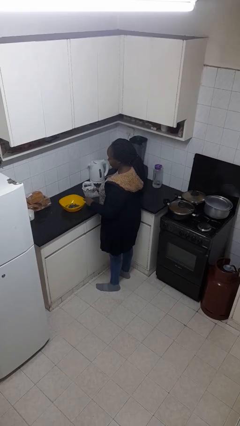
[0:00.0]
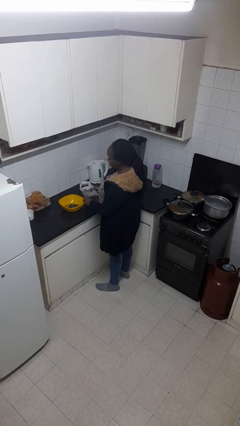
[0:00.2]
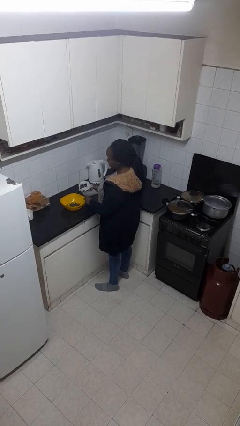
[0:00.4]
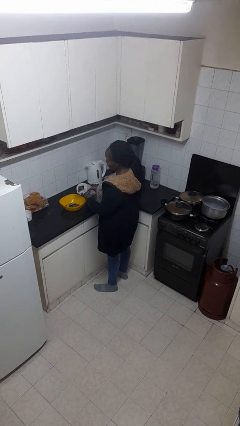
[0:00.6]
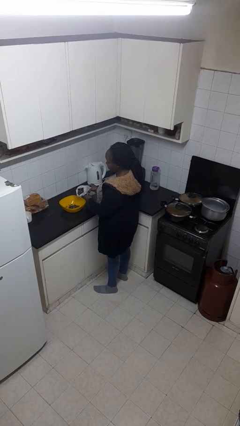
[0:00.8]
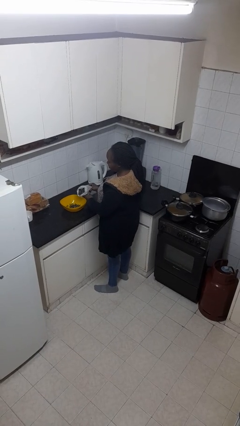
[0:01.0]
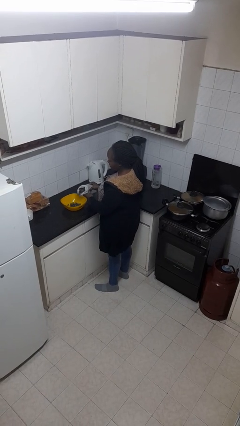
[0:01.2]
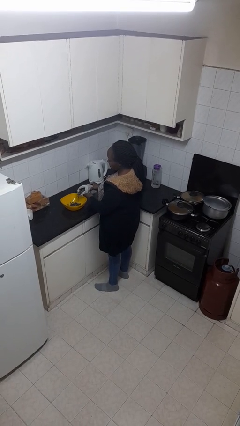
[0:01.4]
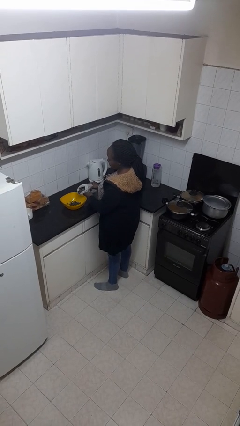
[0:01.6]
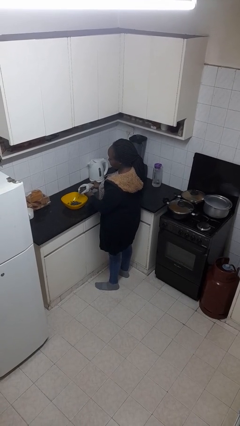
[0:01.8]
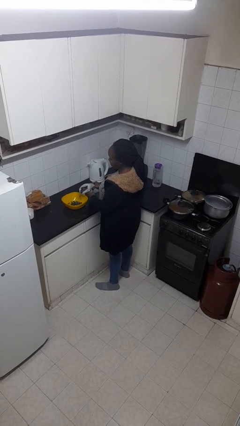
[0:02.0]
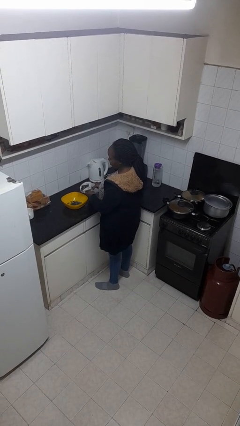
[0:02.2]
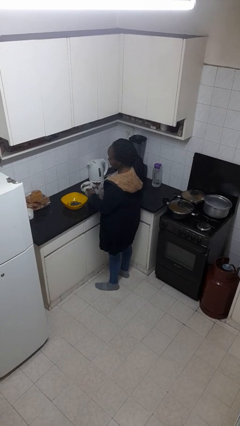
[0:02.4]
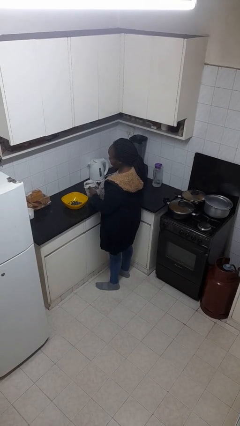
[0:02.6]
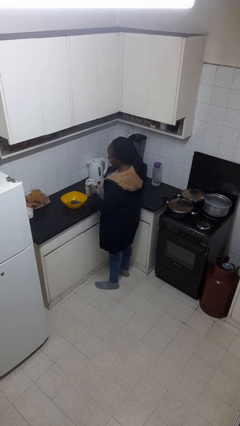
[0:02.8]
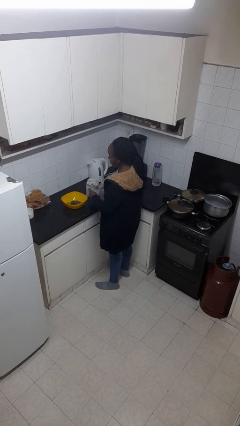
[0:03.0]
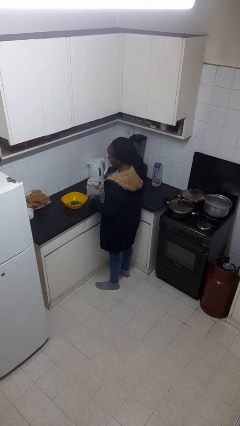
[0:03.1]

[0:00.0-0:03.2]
person pours into bowl

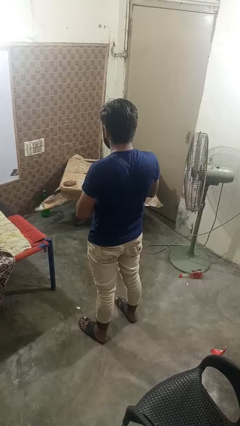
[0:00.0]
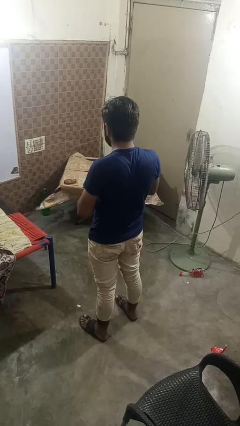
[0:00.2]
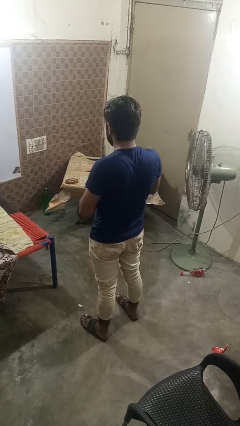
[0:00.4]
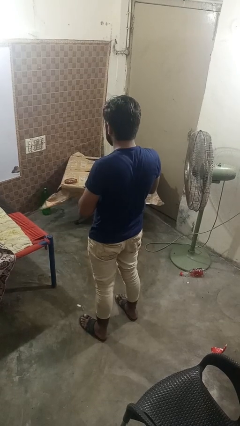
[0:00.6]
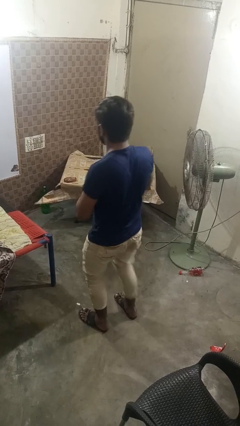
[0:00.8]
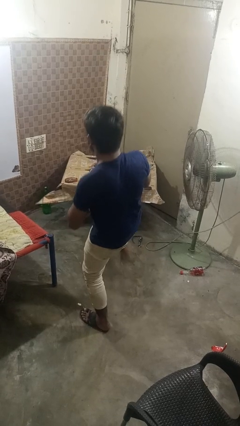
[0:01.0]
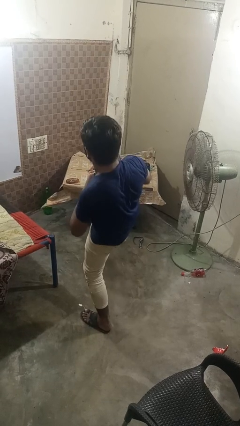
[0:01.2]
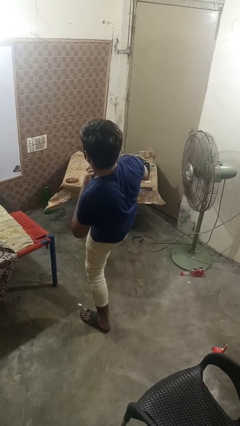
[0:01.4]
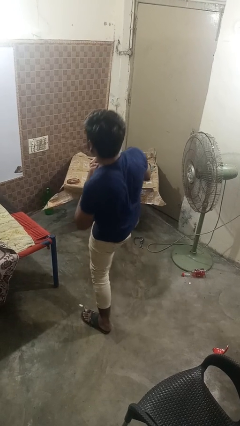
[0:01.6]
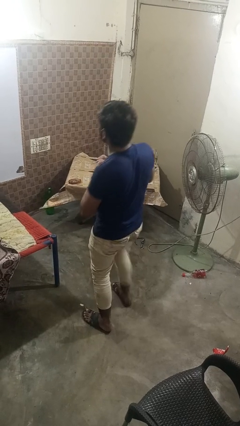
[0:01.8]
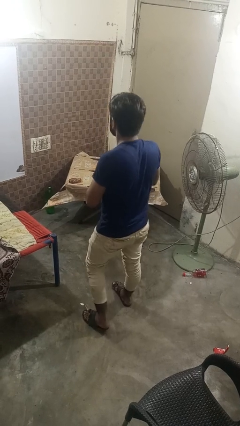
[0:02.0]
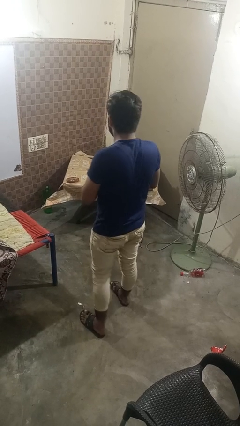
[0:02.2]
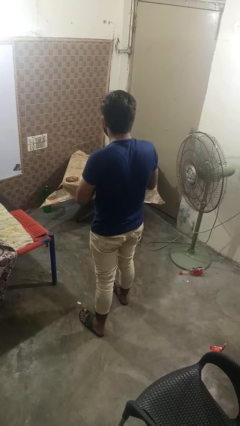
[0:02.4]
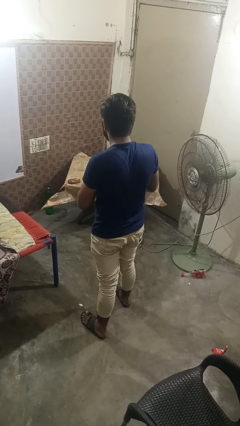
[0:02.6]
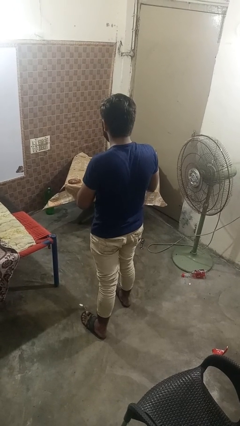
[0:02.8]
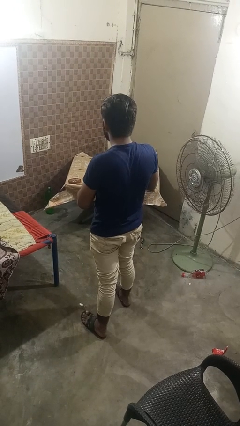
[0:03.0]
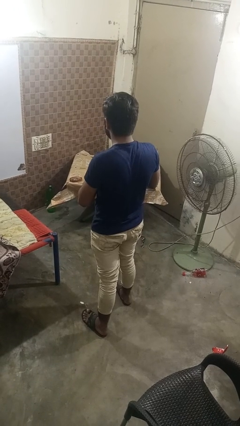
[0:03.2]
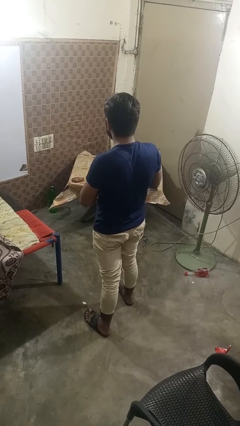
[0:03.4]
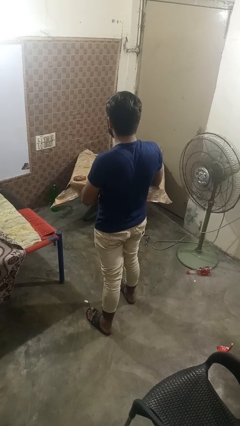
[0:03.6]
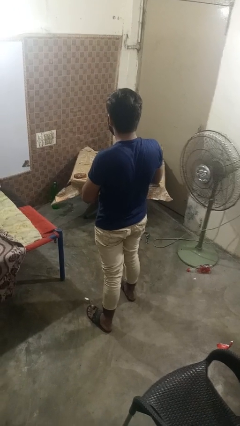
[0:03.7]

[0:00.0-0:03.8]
person karate kicks

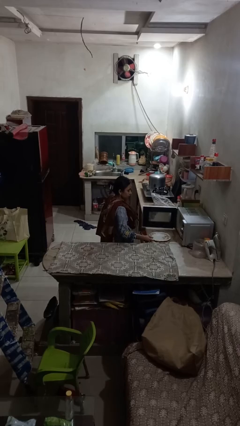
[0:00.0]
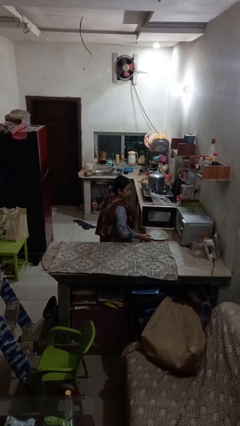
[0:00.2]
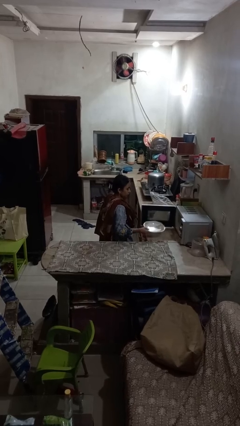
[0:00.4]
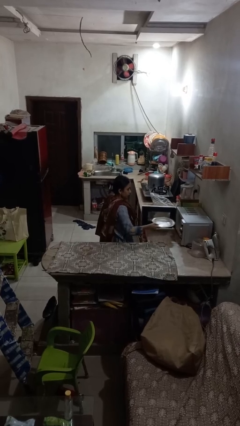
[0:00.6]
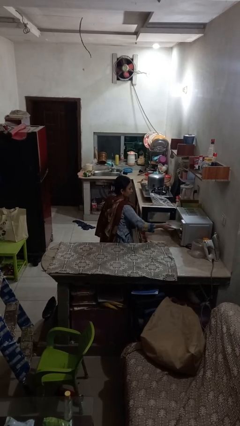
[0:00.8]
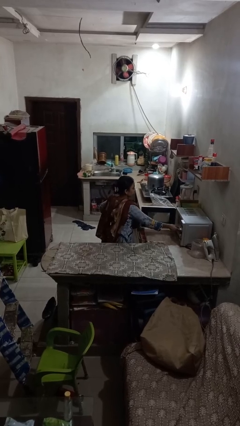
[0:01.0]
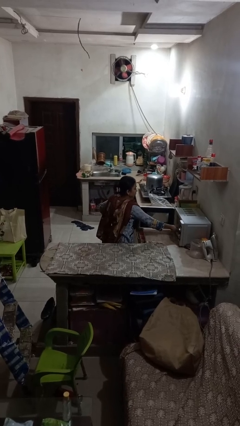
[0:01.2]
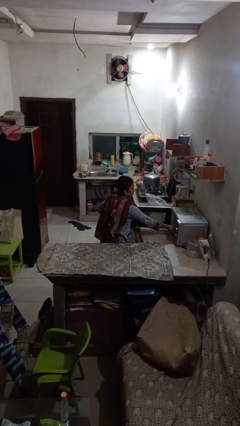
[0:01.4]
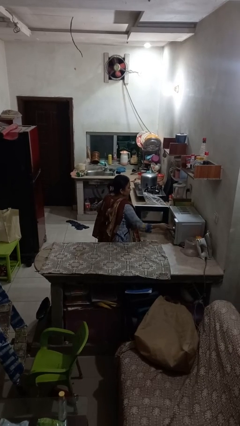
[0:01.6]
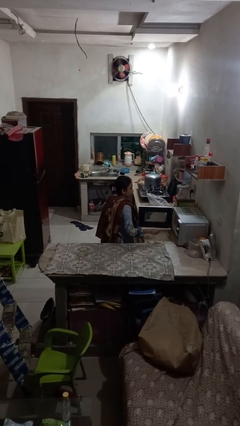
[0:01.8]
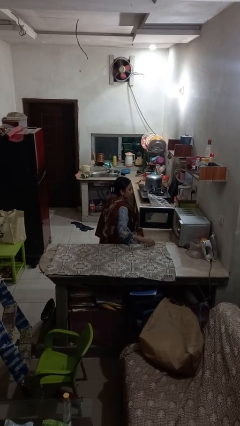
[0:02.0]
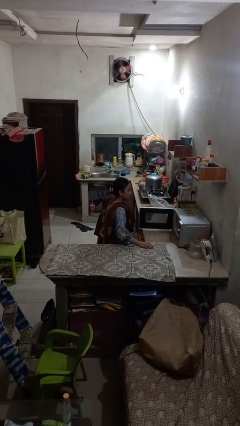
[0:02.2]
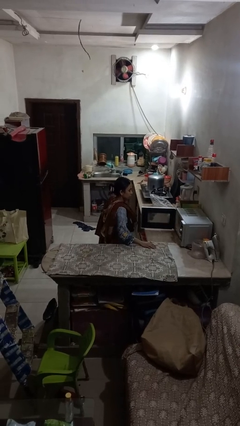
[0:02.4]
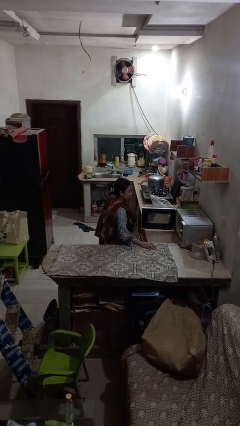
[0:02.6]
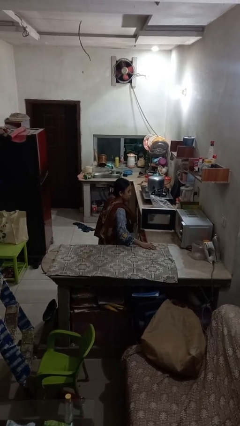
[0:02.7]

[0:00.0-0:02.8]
person puts object into microwave

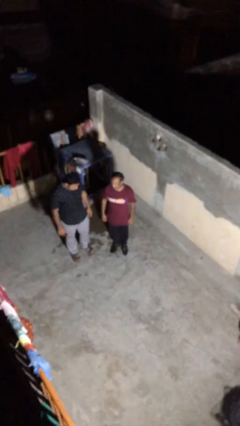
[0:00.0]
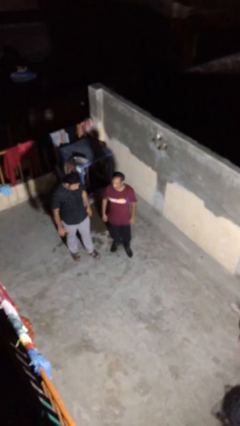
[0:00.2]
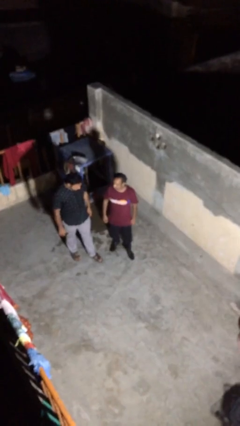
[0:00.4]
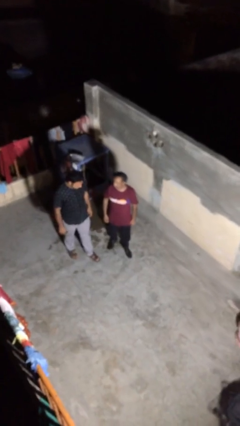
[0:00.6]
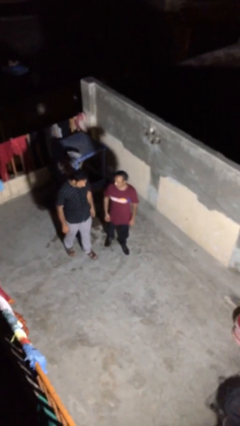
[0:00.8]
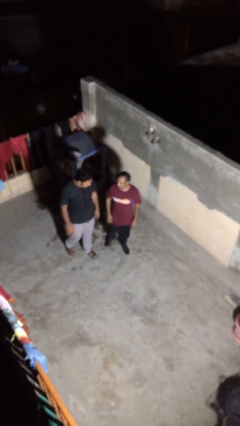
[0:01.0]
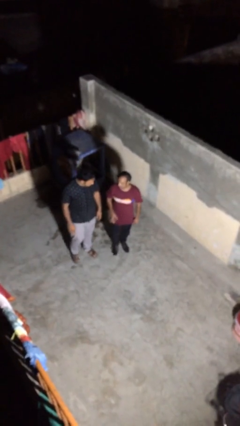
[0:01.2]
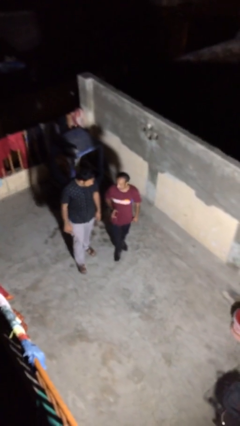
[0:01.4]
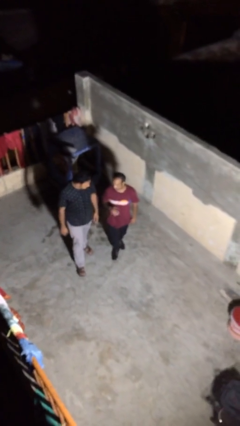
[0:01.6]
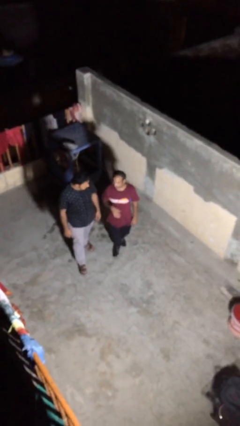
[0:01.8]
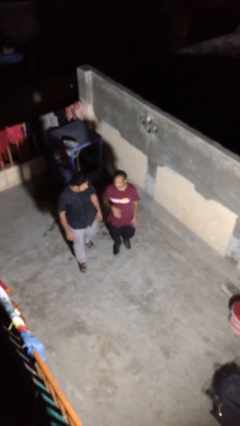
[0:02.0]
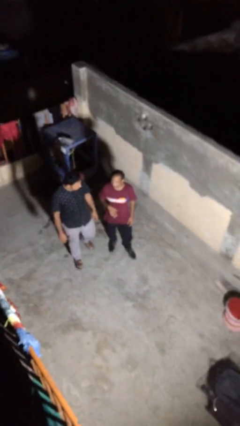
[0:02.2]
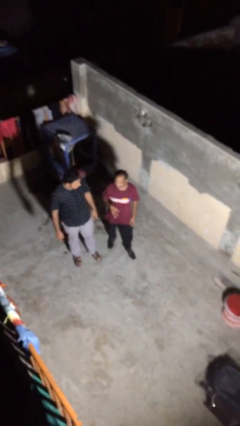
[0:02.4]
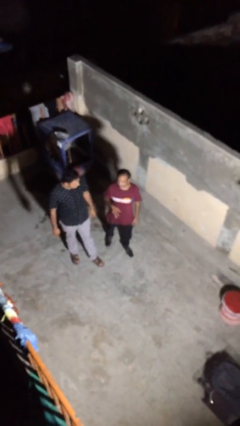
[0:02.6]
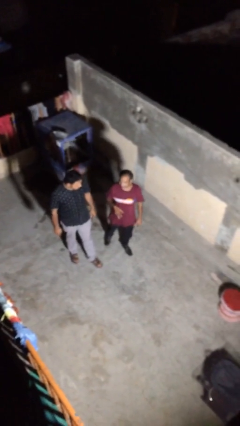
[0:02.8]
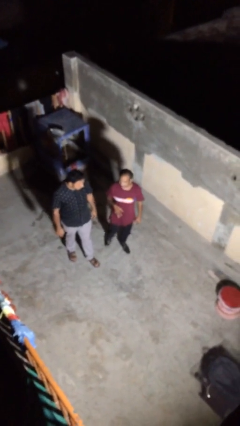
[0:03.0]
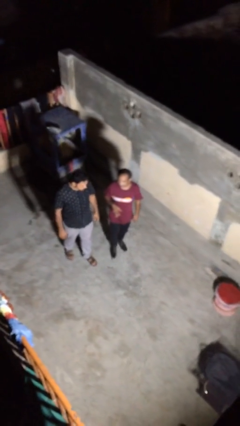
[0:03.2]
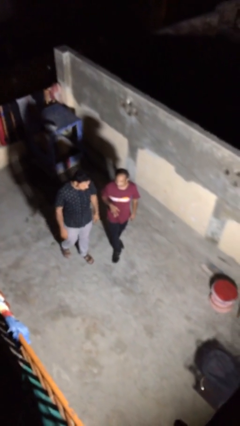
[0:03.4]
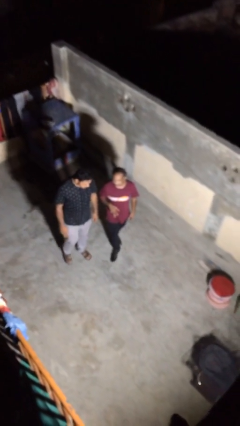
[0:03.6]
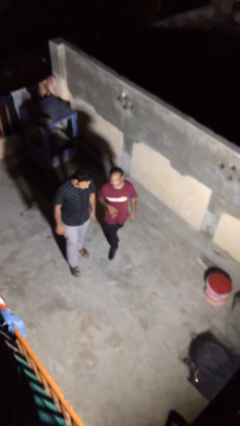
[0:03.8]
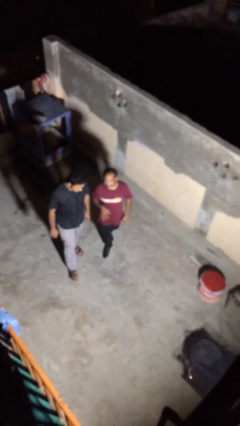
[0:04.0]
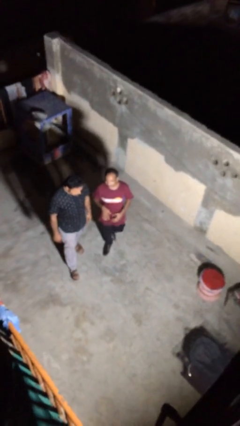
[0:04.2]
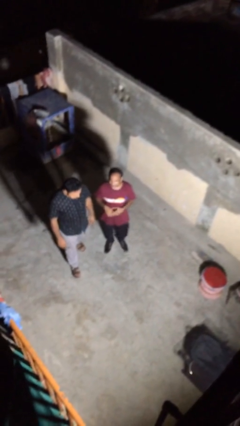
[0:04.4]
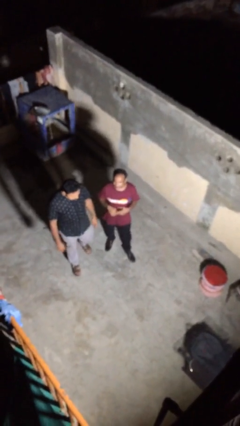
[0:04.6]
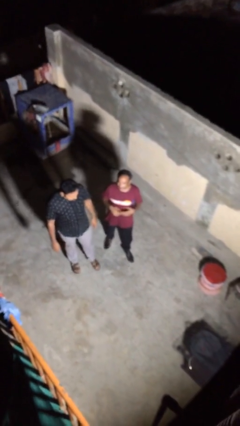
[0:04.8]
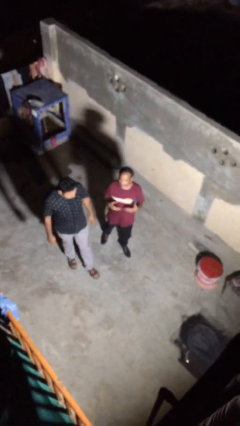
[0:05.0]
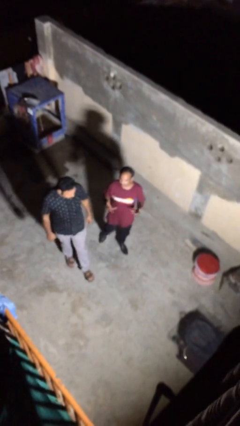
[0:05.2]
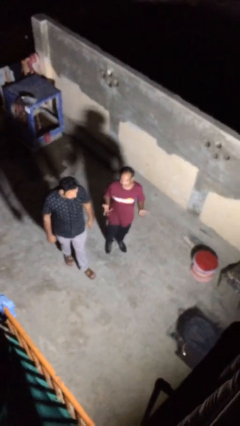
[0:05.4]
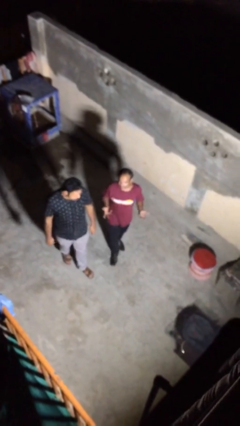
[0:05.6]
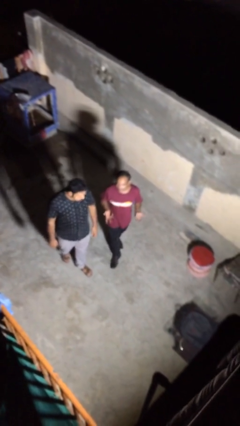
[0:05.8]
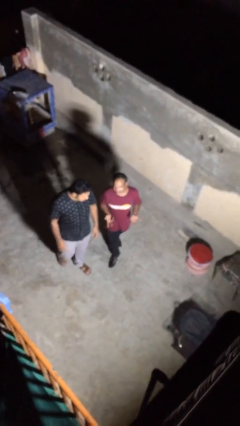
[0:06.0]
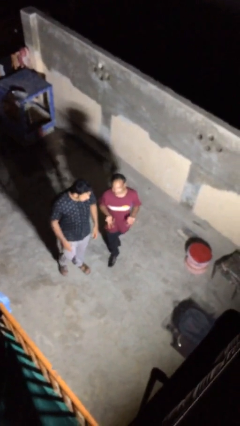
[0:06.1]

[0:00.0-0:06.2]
person talks to person

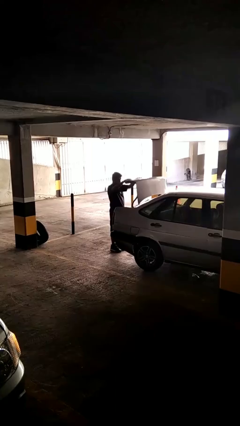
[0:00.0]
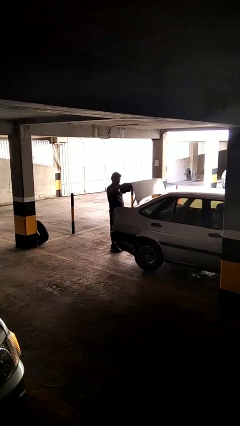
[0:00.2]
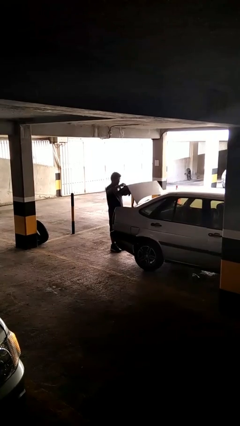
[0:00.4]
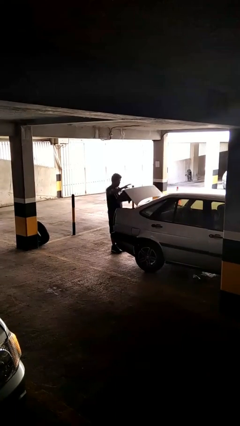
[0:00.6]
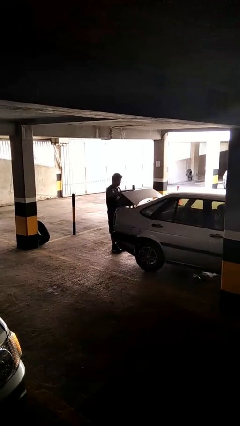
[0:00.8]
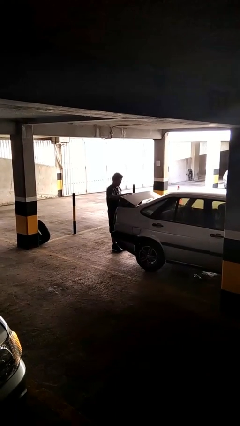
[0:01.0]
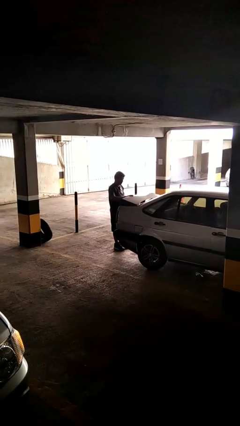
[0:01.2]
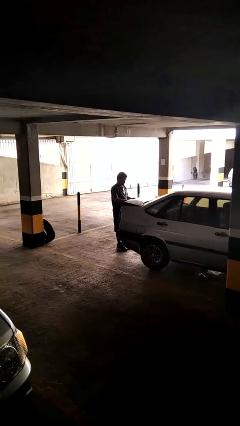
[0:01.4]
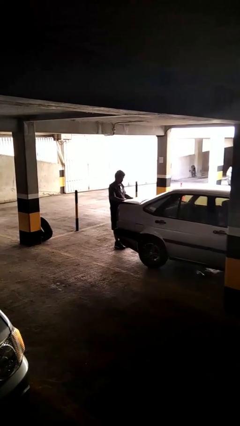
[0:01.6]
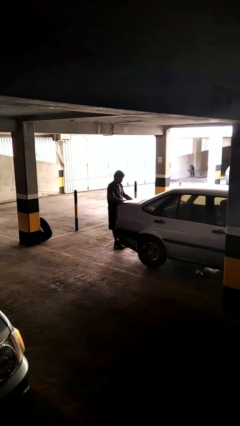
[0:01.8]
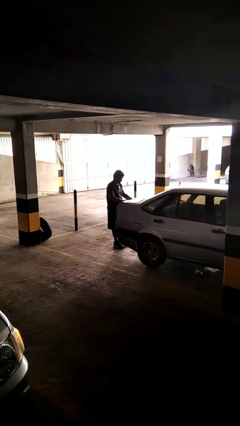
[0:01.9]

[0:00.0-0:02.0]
person closes car trunk
